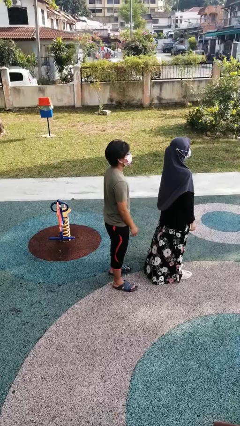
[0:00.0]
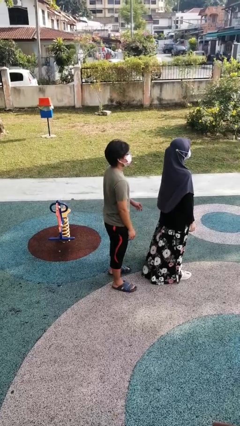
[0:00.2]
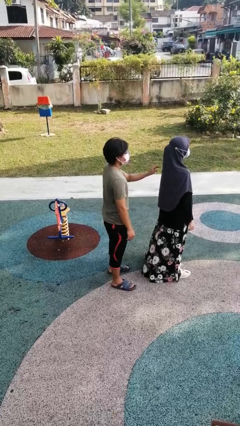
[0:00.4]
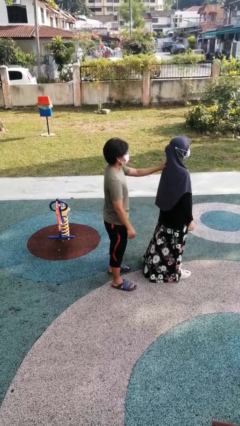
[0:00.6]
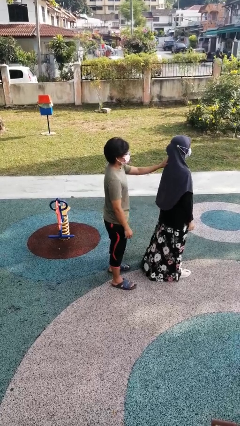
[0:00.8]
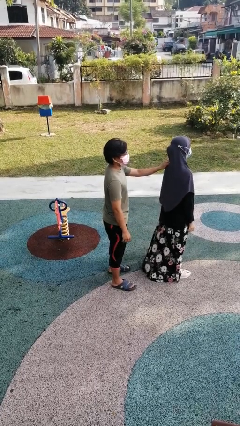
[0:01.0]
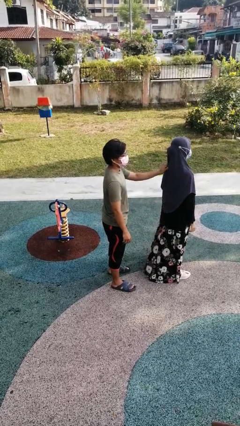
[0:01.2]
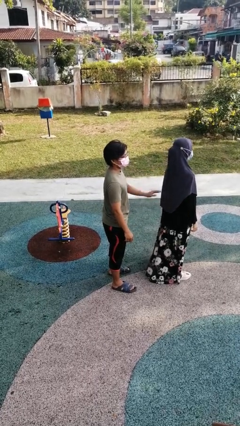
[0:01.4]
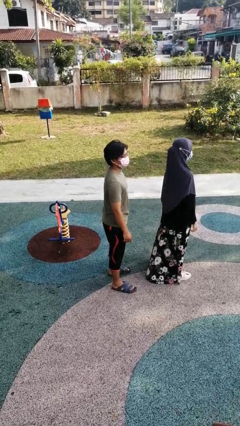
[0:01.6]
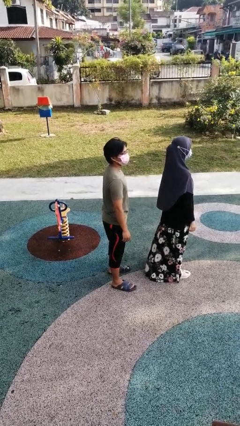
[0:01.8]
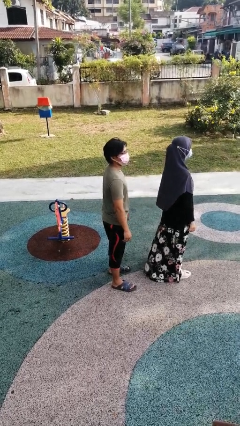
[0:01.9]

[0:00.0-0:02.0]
person touches back of person

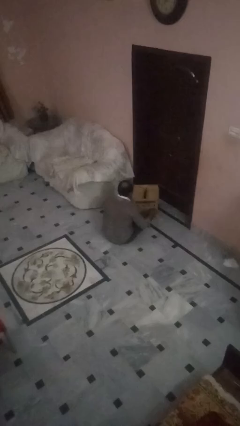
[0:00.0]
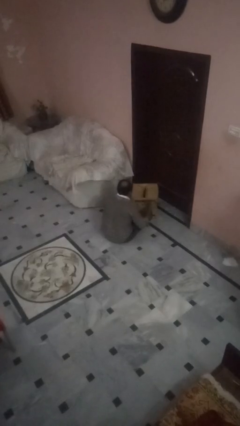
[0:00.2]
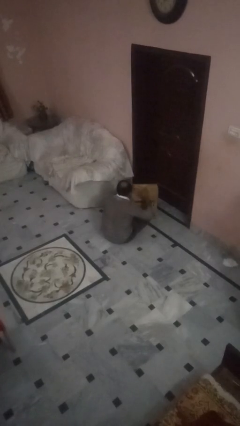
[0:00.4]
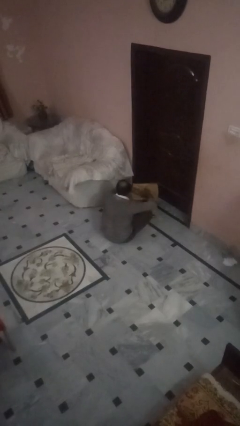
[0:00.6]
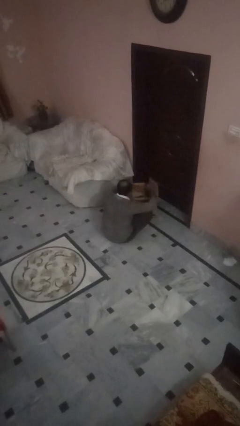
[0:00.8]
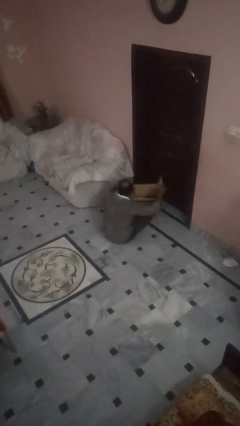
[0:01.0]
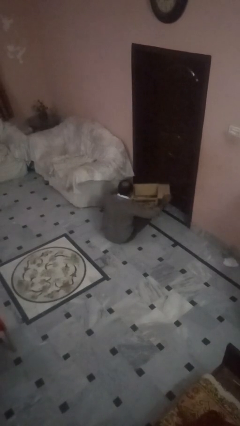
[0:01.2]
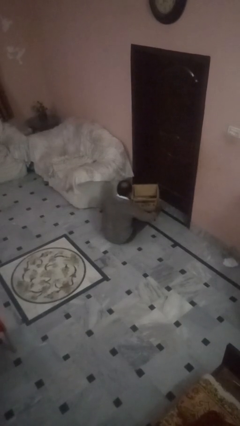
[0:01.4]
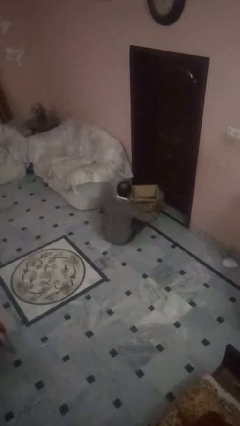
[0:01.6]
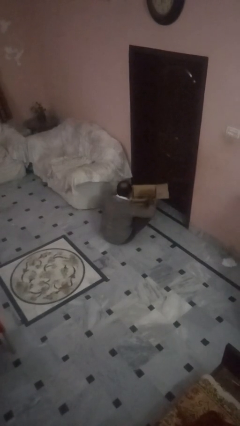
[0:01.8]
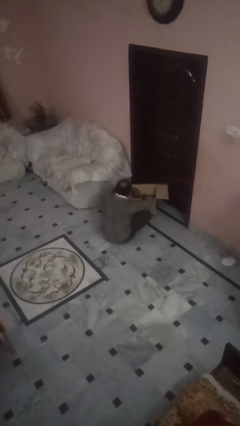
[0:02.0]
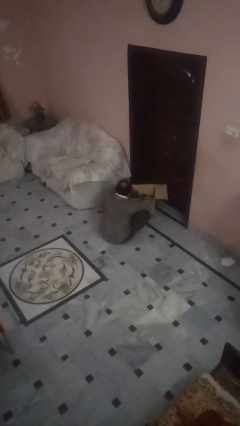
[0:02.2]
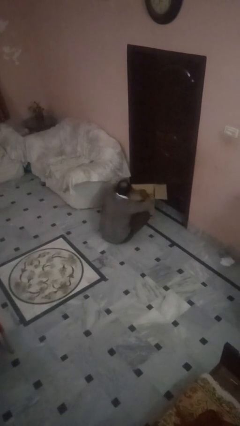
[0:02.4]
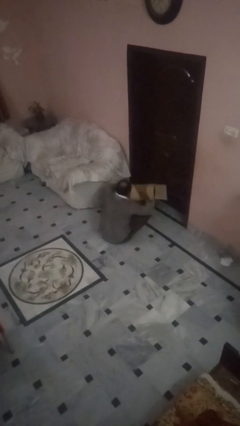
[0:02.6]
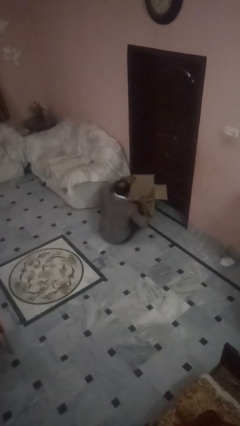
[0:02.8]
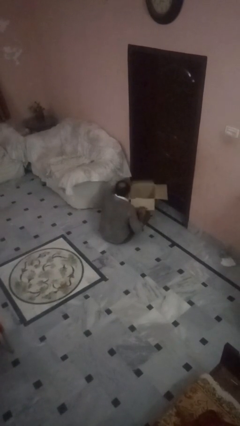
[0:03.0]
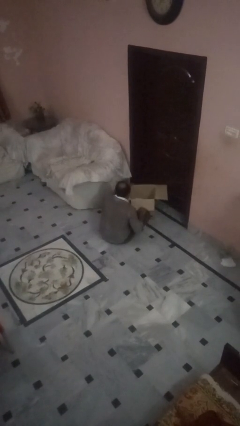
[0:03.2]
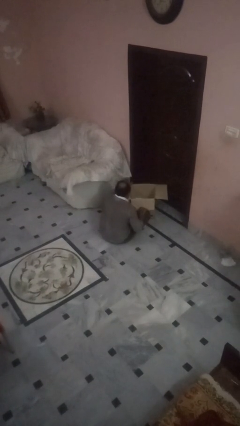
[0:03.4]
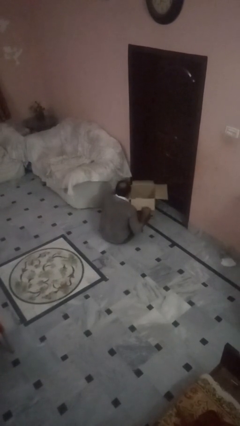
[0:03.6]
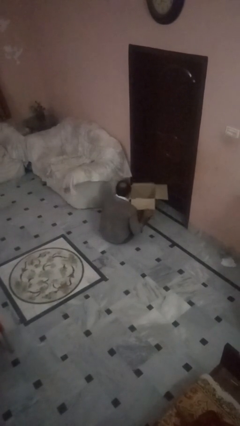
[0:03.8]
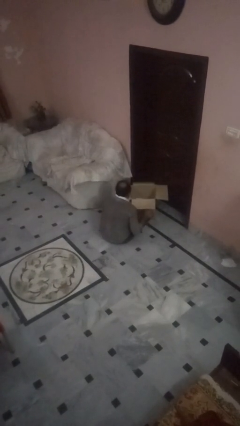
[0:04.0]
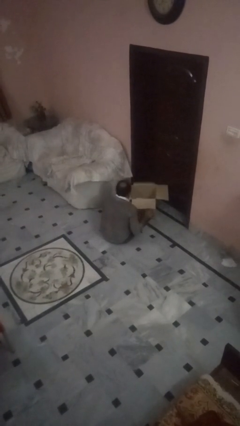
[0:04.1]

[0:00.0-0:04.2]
person opens box

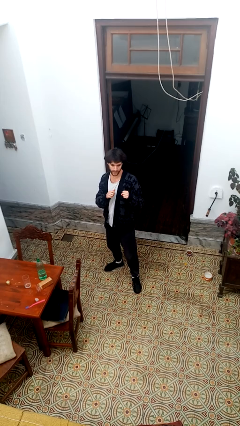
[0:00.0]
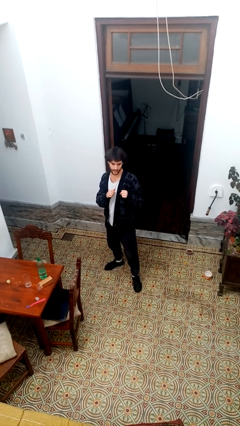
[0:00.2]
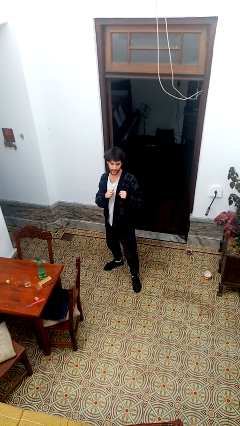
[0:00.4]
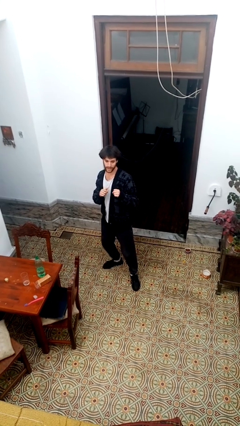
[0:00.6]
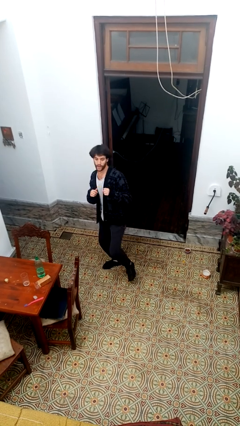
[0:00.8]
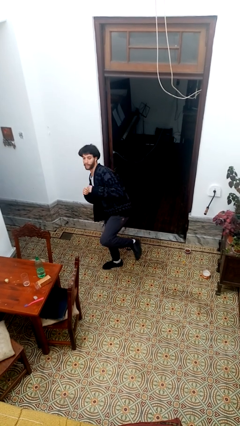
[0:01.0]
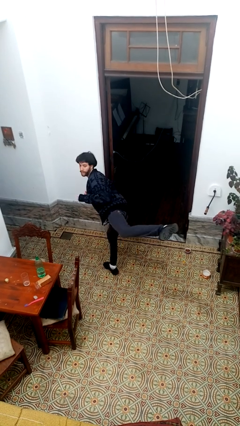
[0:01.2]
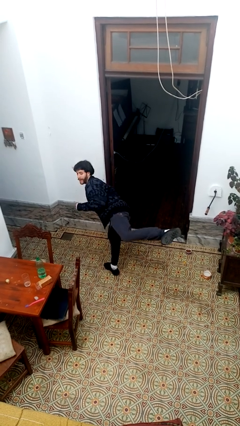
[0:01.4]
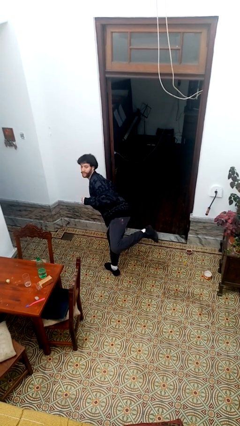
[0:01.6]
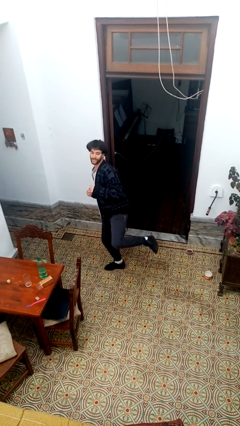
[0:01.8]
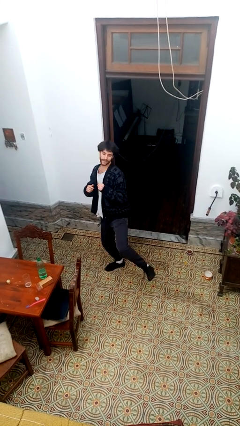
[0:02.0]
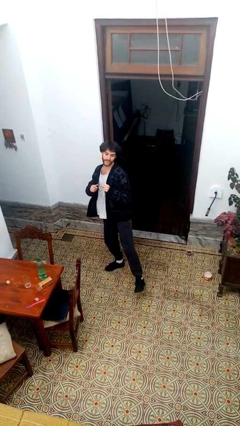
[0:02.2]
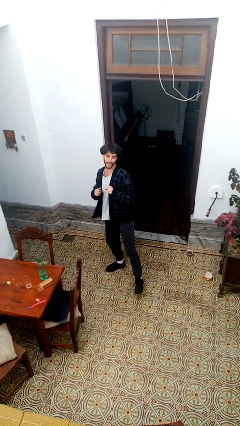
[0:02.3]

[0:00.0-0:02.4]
person karate kicks

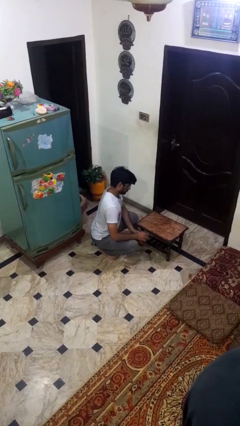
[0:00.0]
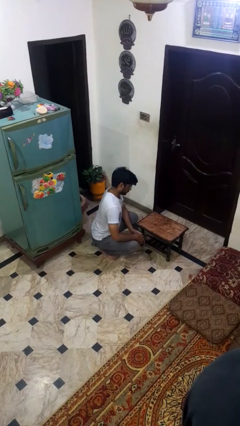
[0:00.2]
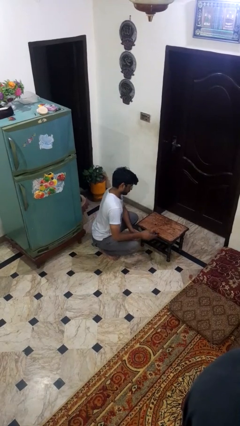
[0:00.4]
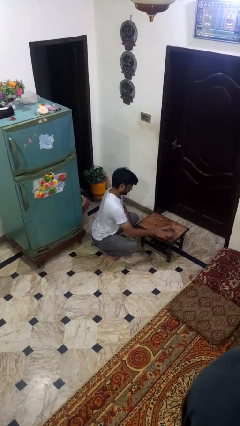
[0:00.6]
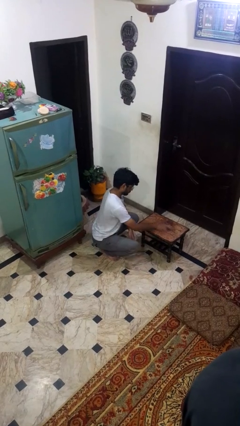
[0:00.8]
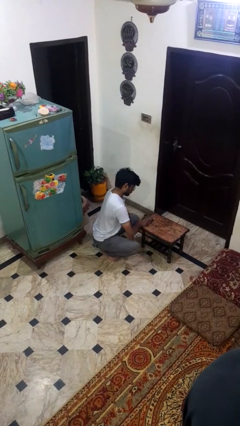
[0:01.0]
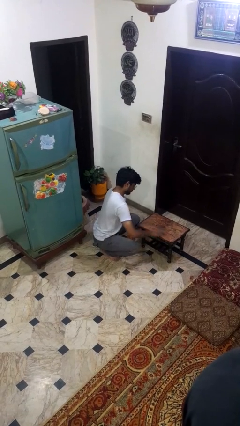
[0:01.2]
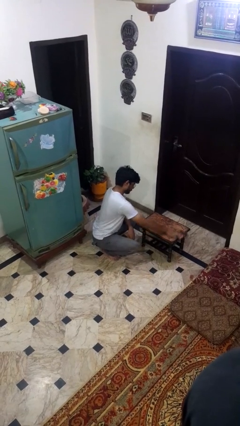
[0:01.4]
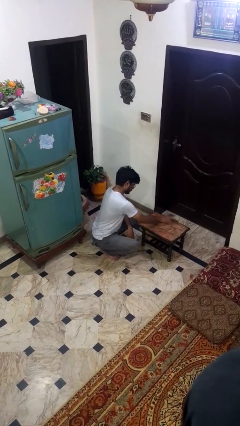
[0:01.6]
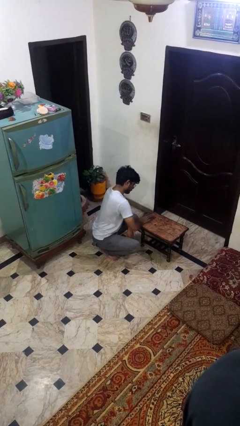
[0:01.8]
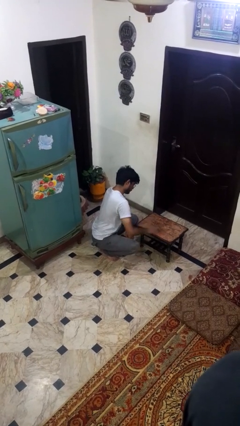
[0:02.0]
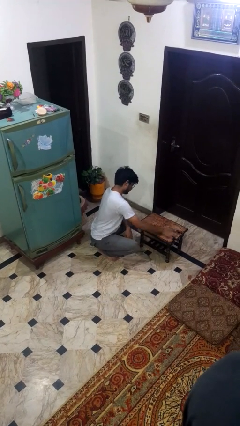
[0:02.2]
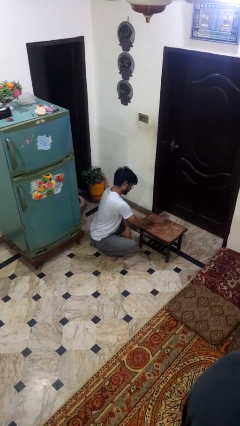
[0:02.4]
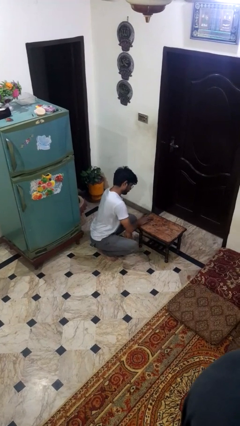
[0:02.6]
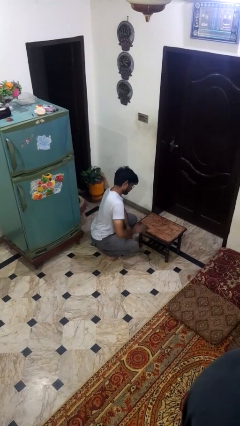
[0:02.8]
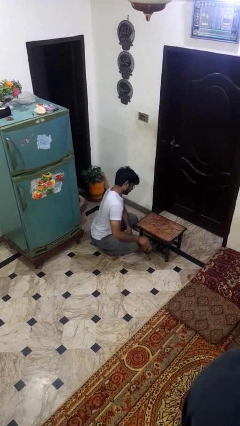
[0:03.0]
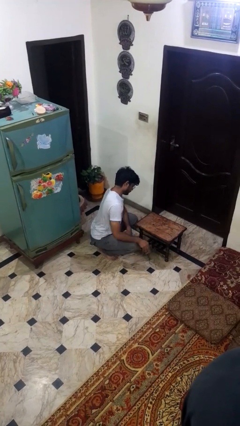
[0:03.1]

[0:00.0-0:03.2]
person cleans table with rag

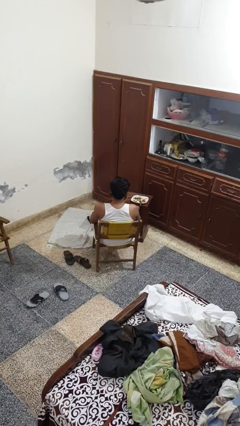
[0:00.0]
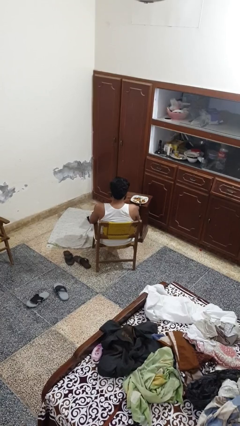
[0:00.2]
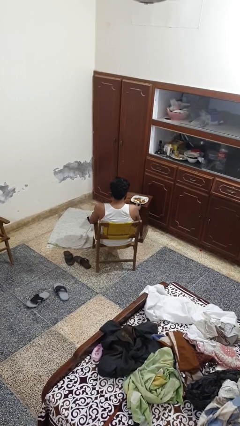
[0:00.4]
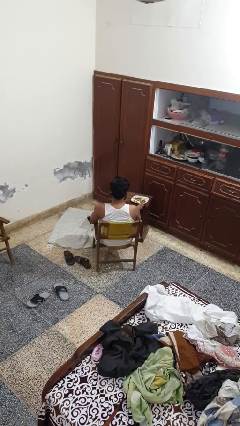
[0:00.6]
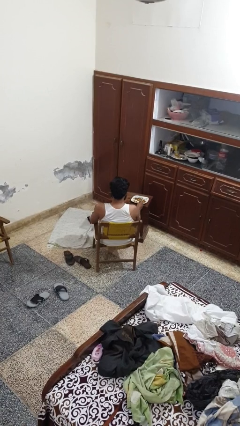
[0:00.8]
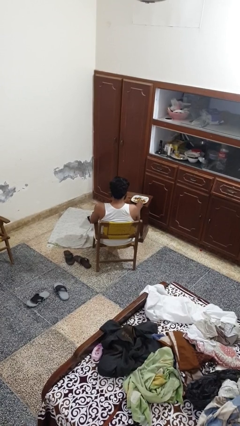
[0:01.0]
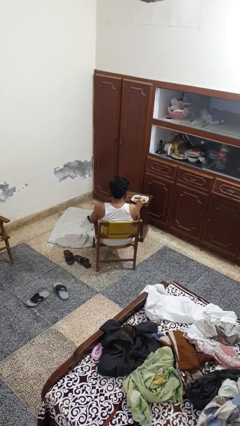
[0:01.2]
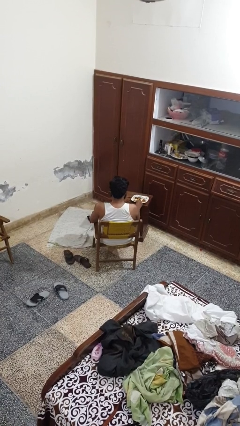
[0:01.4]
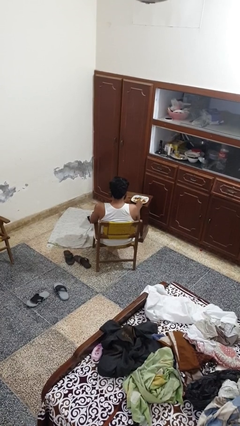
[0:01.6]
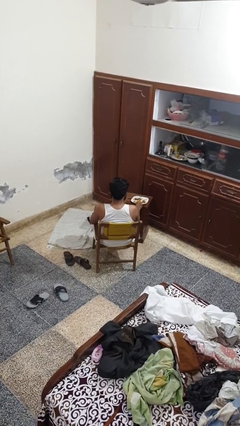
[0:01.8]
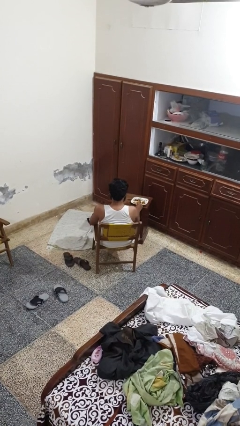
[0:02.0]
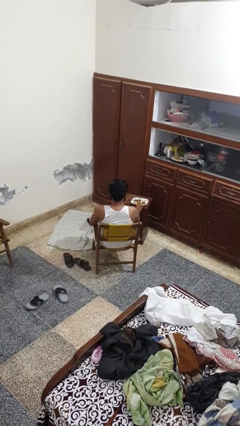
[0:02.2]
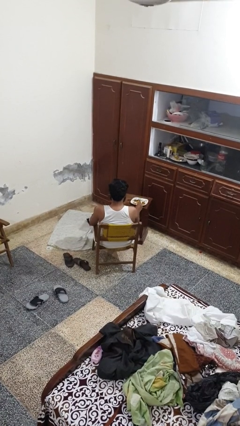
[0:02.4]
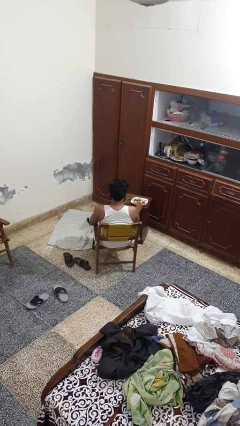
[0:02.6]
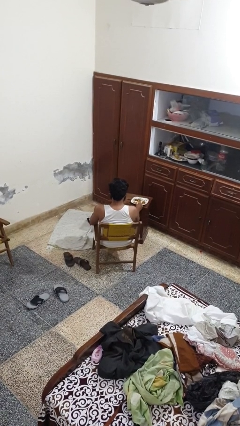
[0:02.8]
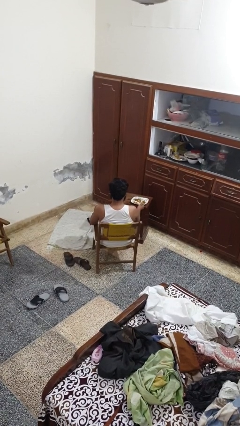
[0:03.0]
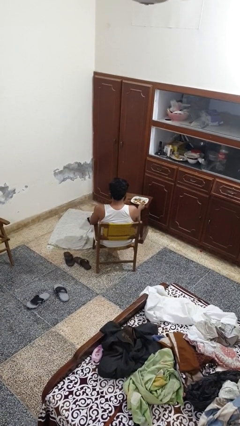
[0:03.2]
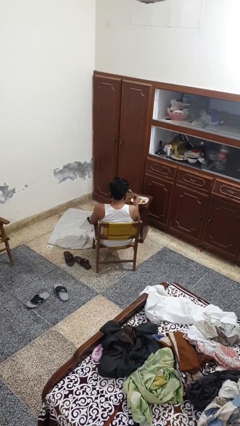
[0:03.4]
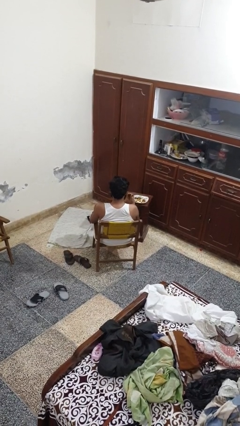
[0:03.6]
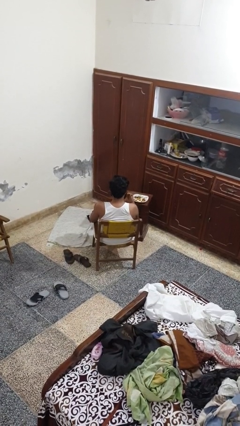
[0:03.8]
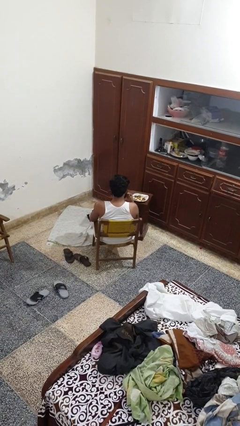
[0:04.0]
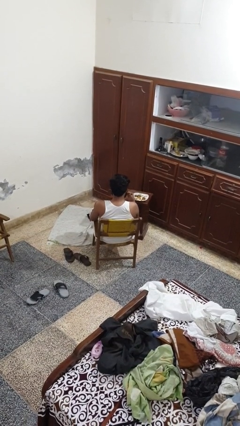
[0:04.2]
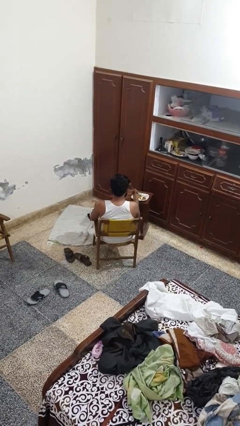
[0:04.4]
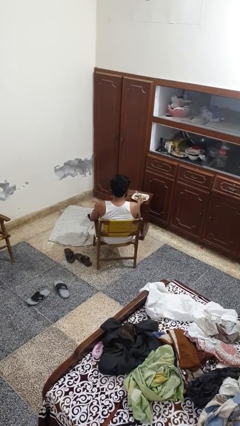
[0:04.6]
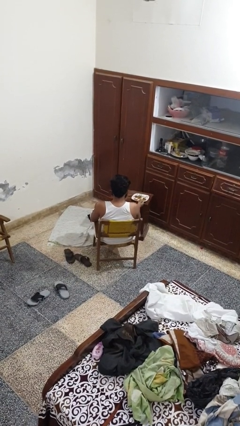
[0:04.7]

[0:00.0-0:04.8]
person eats with utensil

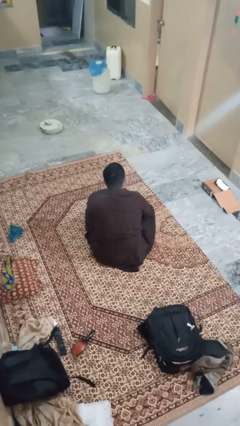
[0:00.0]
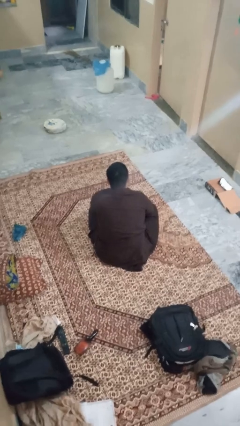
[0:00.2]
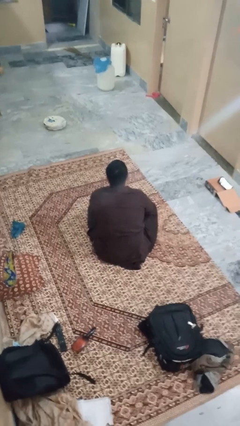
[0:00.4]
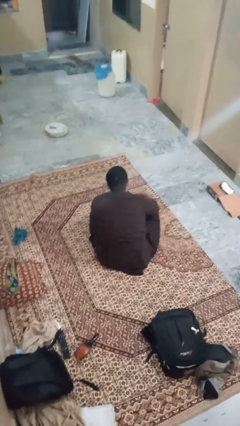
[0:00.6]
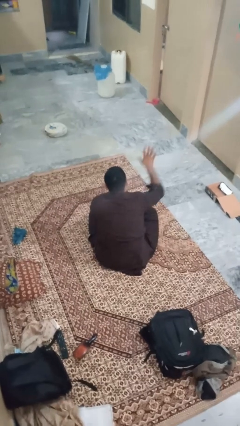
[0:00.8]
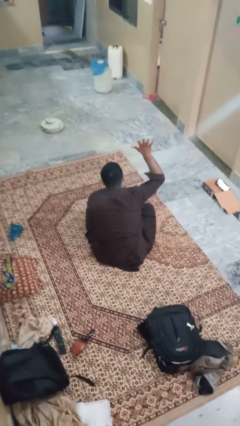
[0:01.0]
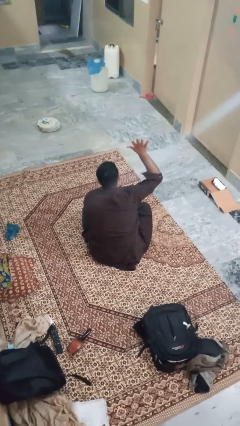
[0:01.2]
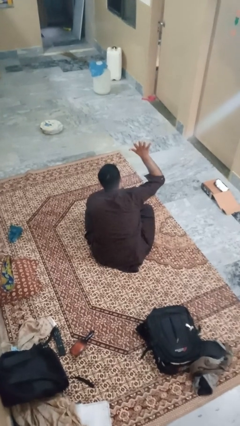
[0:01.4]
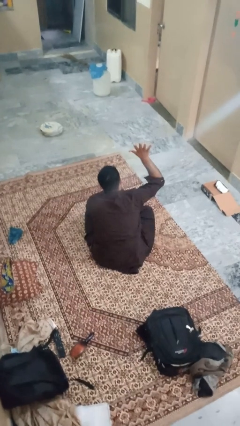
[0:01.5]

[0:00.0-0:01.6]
person gestures number five
